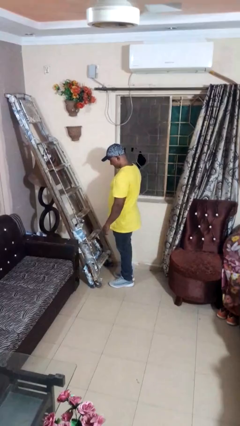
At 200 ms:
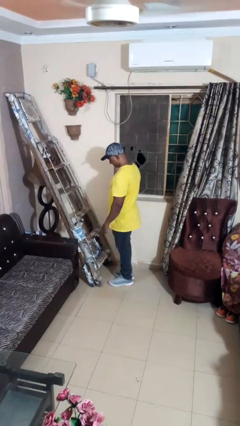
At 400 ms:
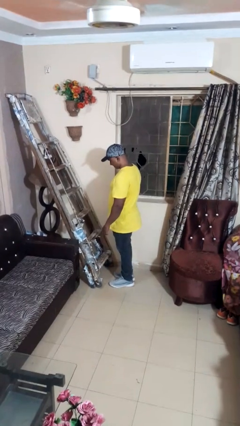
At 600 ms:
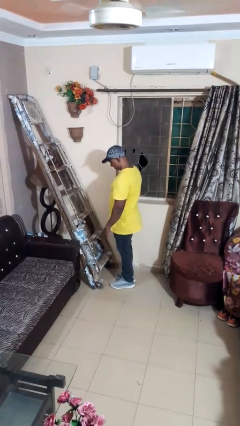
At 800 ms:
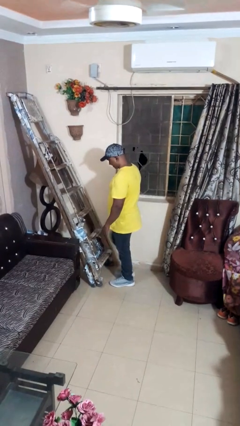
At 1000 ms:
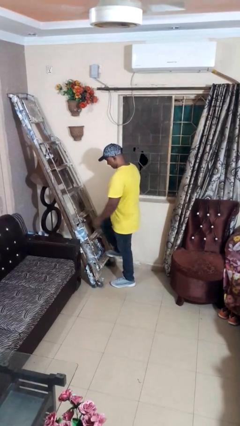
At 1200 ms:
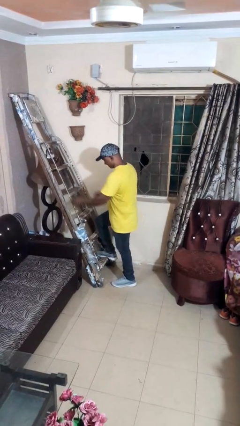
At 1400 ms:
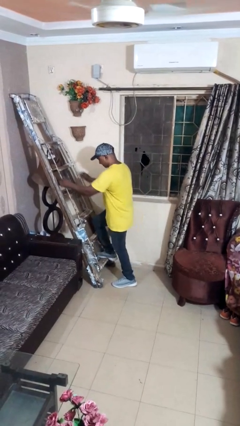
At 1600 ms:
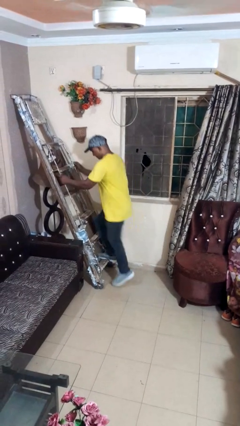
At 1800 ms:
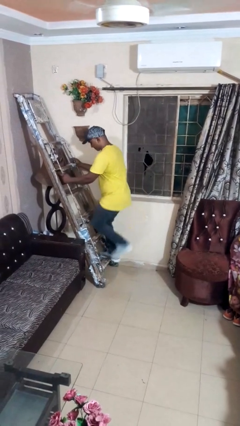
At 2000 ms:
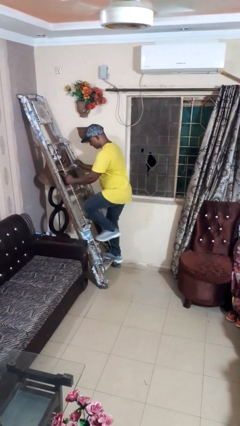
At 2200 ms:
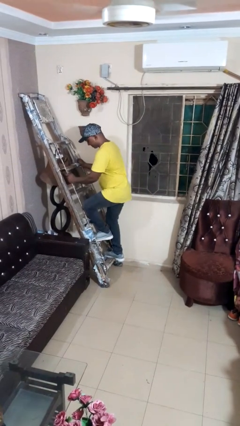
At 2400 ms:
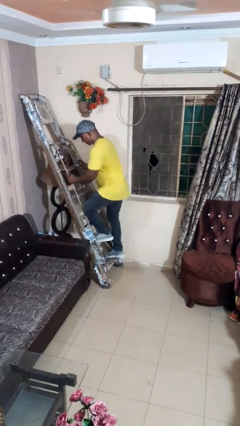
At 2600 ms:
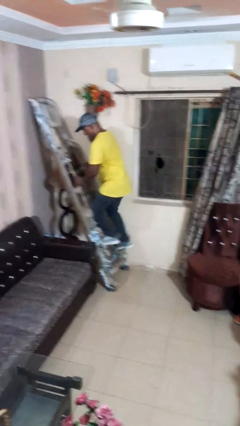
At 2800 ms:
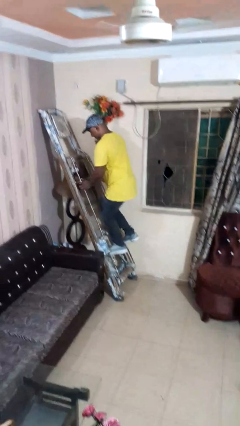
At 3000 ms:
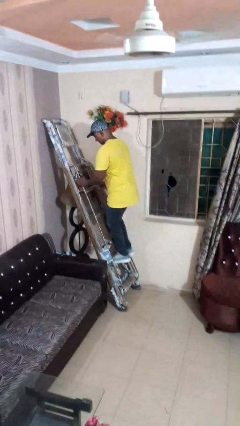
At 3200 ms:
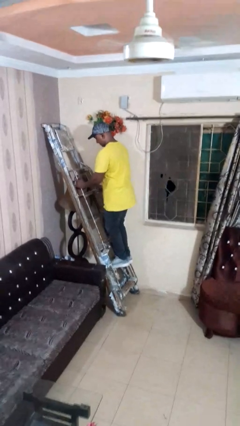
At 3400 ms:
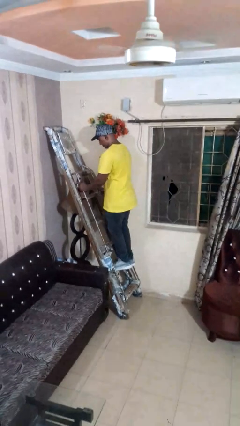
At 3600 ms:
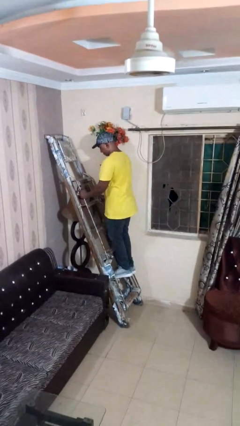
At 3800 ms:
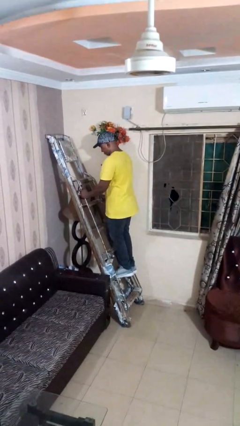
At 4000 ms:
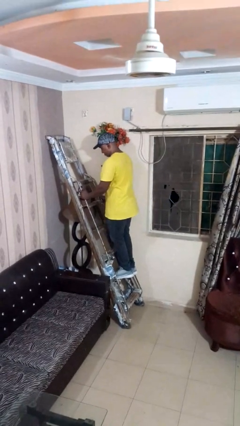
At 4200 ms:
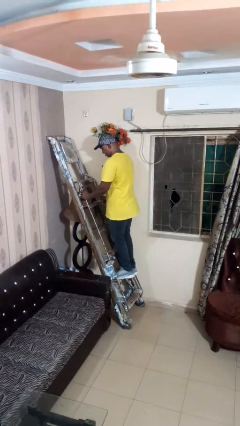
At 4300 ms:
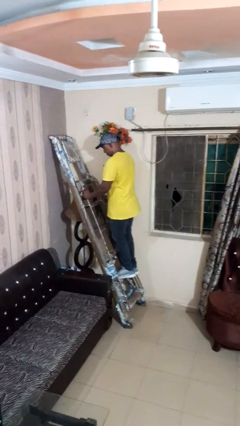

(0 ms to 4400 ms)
person climbs up ladder

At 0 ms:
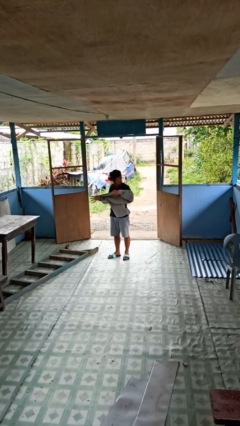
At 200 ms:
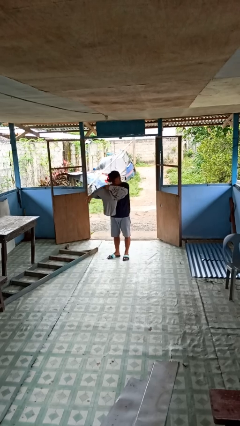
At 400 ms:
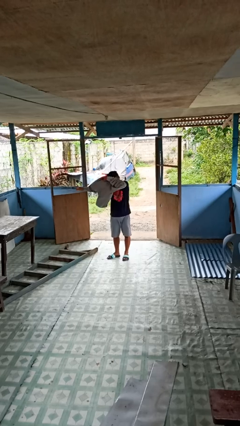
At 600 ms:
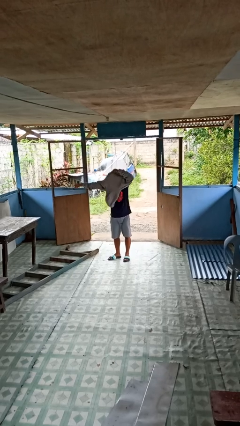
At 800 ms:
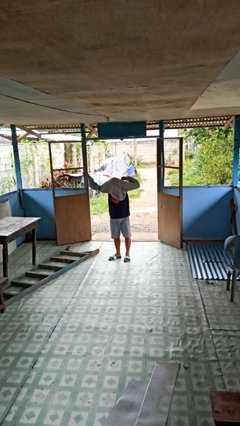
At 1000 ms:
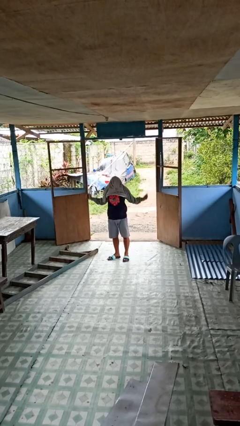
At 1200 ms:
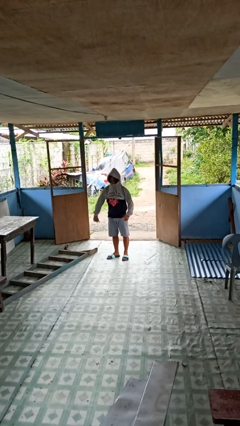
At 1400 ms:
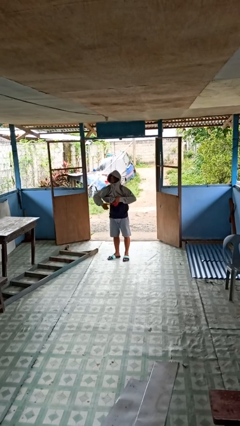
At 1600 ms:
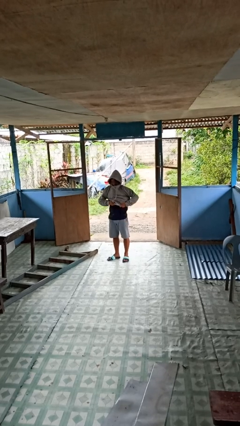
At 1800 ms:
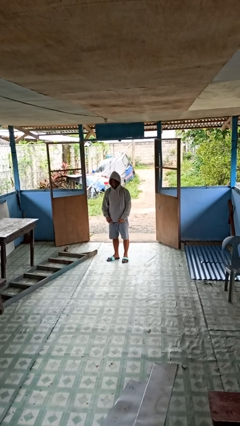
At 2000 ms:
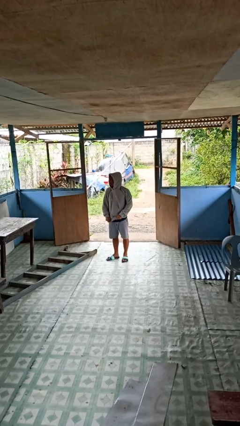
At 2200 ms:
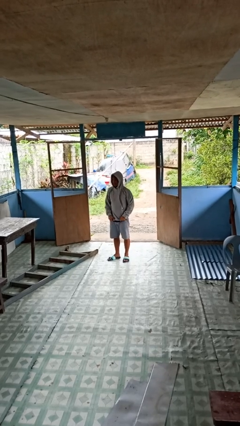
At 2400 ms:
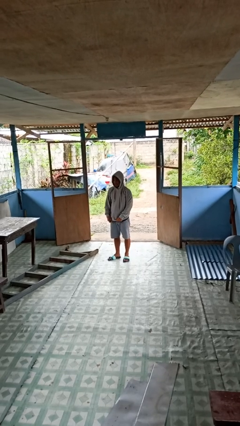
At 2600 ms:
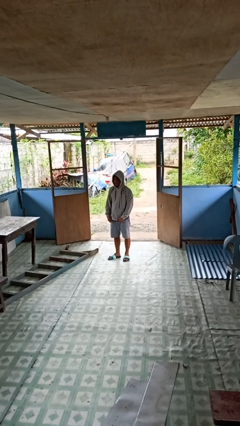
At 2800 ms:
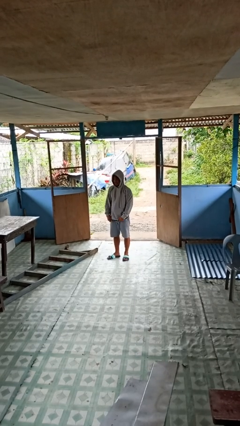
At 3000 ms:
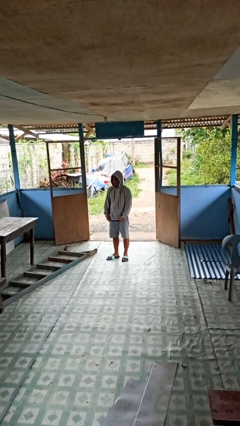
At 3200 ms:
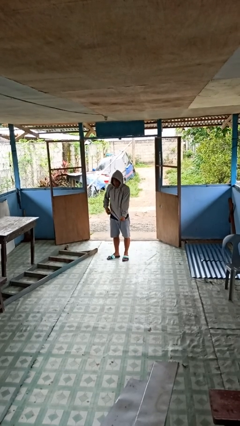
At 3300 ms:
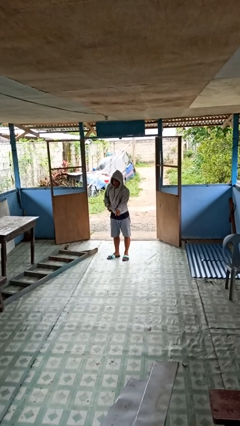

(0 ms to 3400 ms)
person puts on hoodie

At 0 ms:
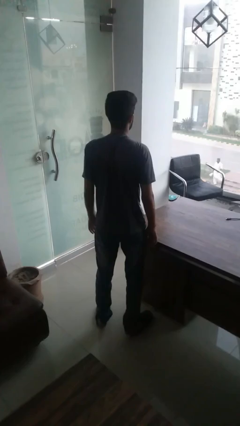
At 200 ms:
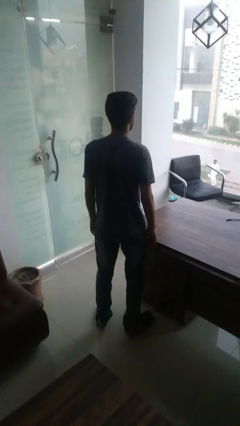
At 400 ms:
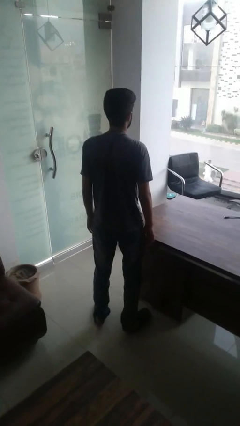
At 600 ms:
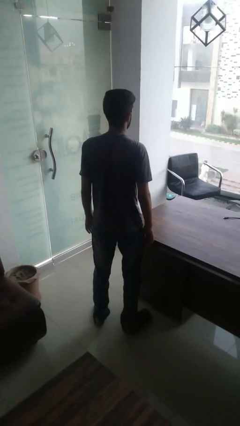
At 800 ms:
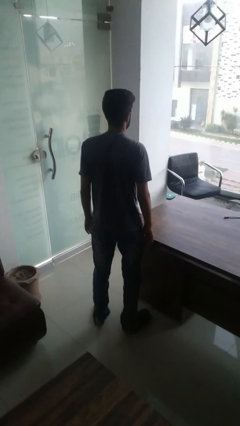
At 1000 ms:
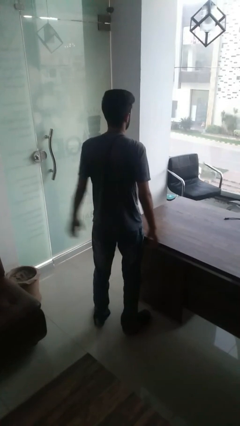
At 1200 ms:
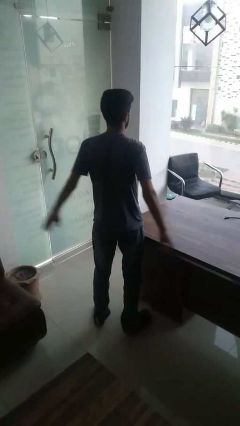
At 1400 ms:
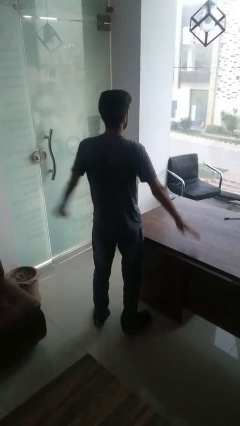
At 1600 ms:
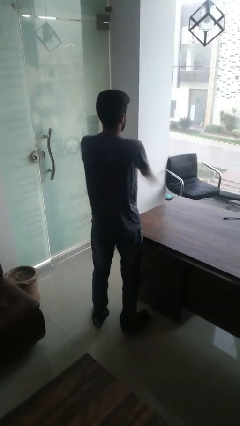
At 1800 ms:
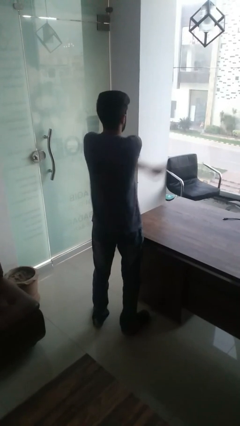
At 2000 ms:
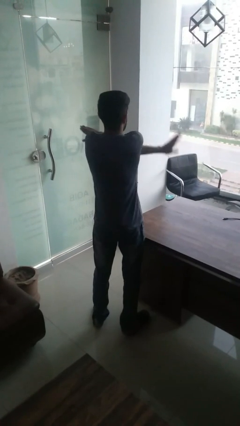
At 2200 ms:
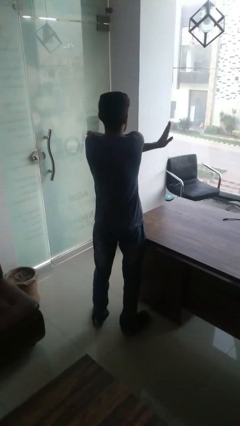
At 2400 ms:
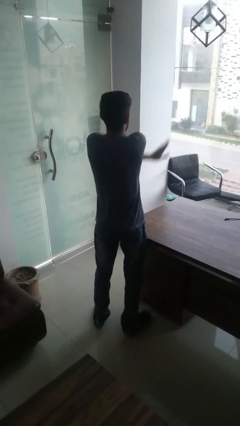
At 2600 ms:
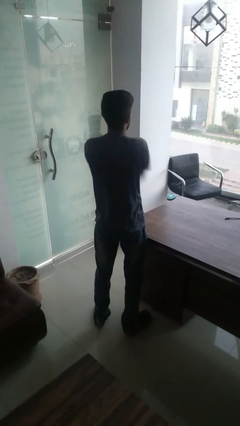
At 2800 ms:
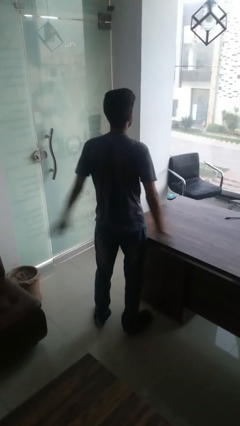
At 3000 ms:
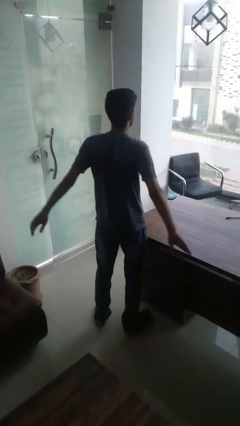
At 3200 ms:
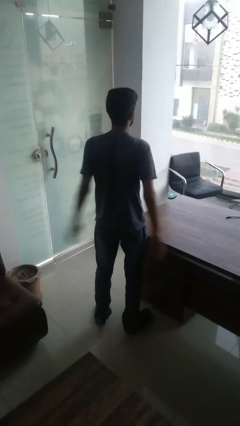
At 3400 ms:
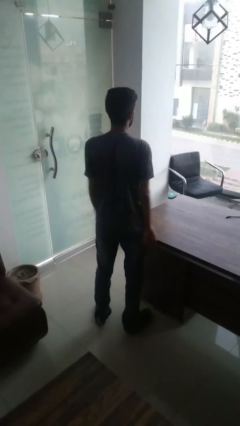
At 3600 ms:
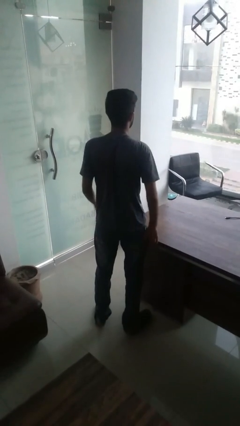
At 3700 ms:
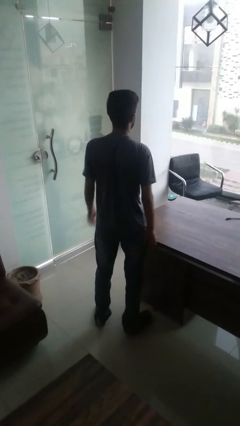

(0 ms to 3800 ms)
person gestures arms x

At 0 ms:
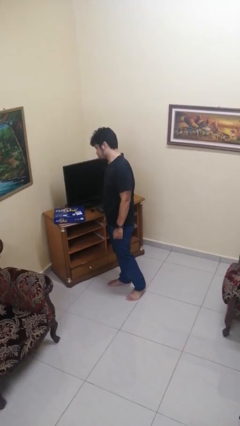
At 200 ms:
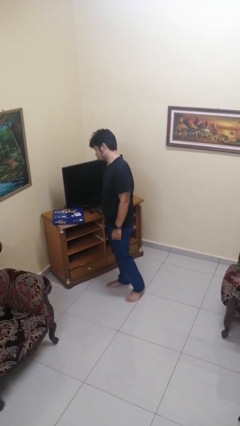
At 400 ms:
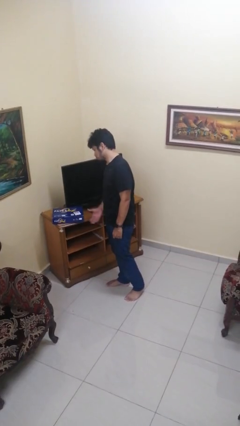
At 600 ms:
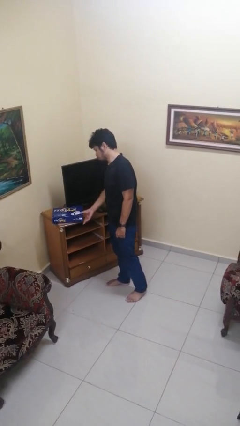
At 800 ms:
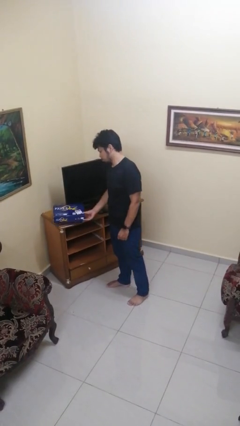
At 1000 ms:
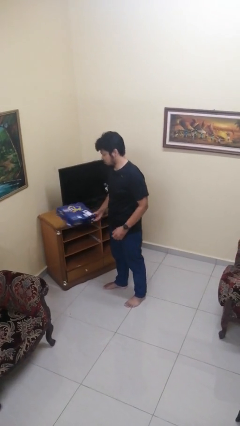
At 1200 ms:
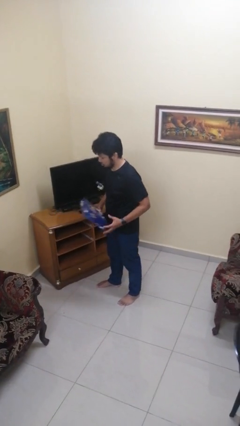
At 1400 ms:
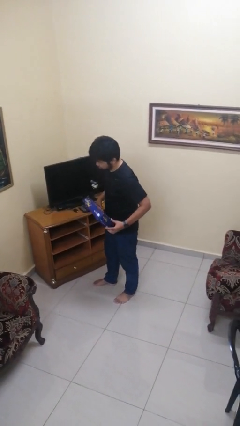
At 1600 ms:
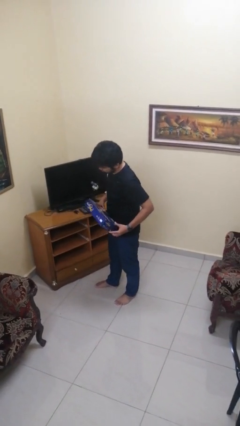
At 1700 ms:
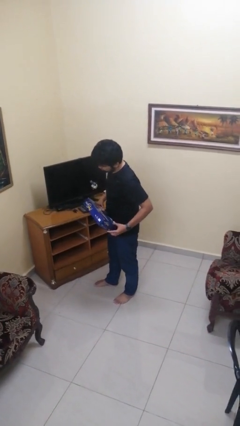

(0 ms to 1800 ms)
person picks up object from countertop

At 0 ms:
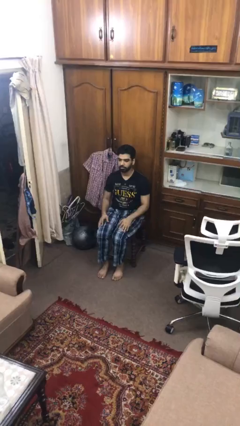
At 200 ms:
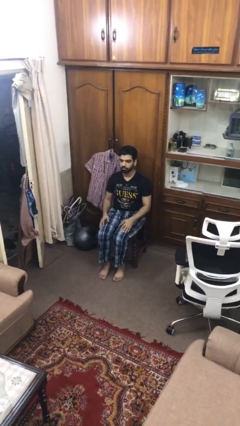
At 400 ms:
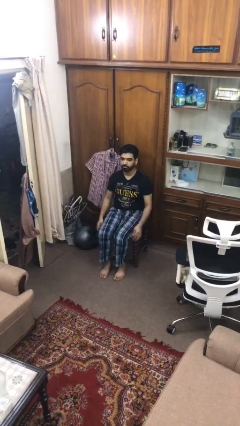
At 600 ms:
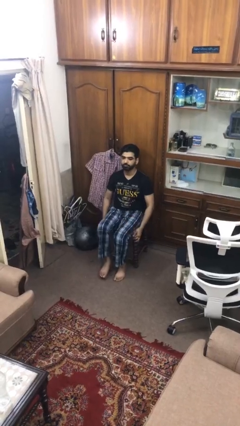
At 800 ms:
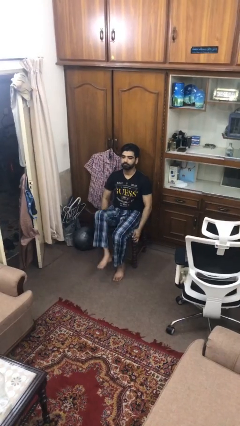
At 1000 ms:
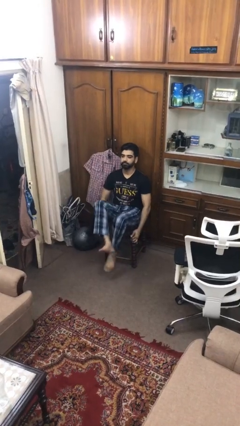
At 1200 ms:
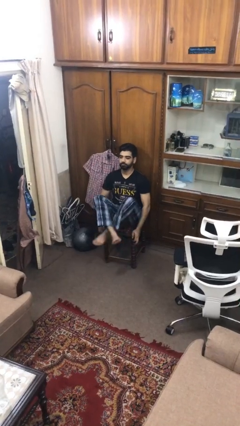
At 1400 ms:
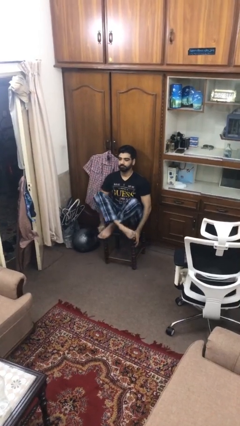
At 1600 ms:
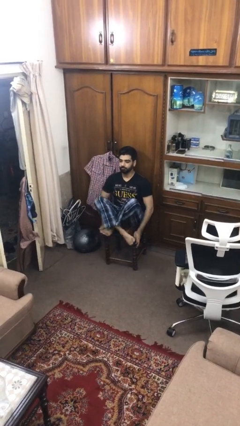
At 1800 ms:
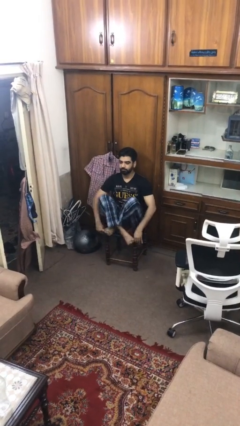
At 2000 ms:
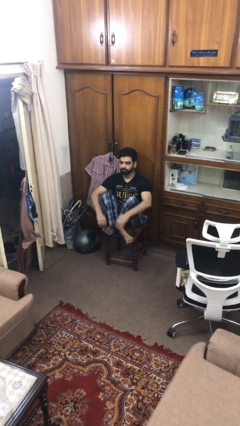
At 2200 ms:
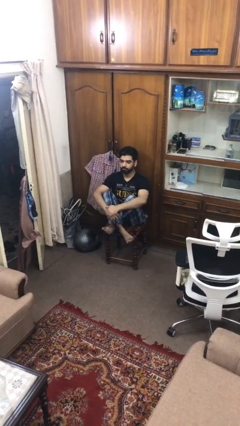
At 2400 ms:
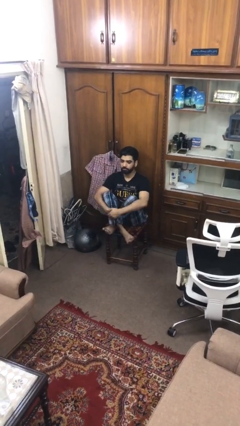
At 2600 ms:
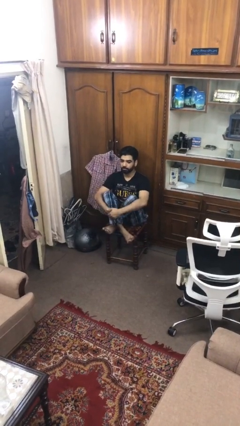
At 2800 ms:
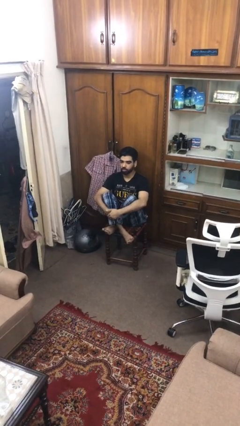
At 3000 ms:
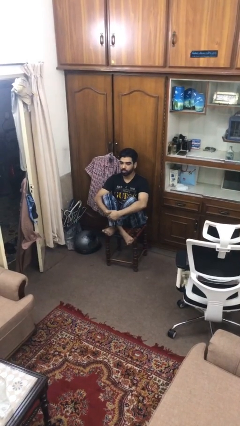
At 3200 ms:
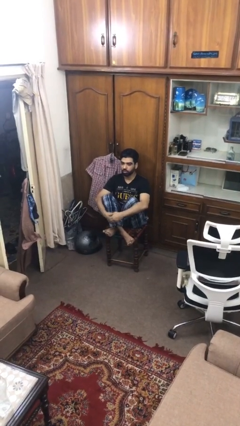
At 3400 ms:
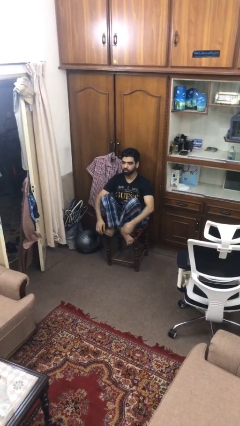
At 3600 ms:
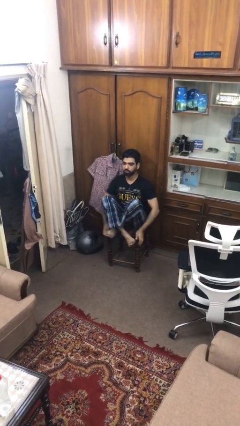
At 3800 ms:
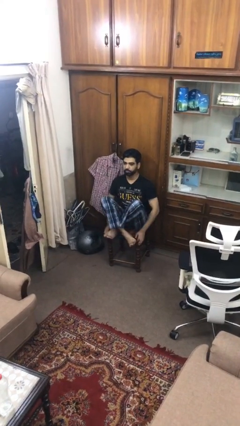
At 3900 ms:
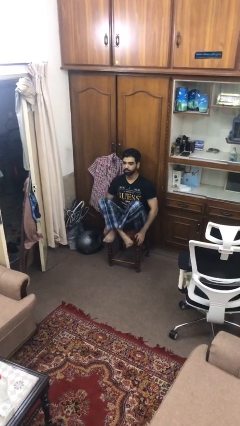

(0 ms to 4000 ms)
person crosses legs

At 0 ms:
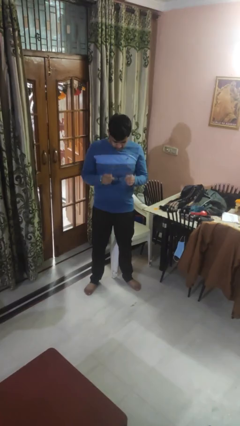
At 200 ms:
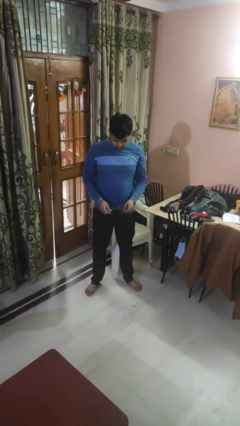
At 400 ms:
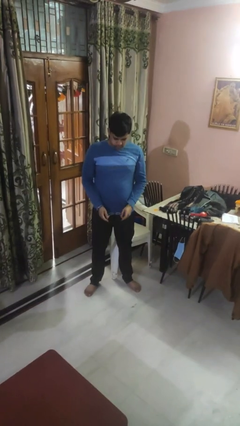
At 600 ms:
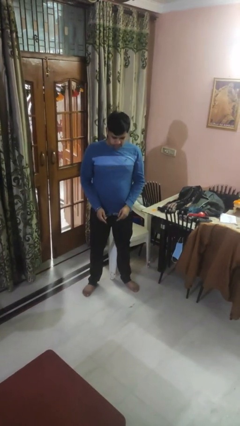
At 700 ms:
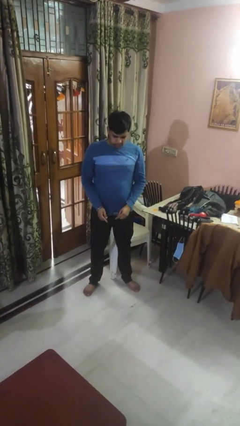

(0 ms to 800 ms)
person takes off glasses
